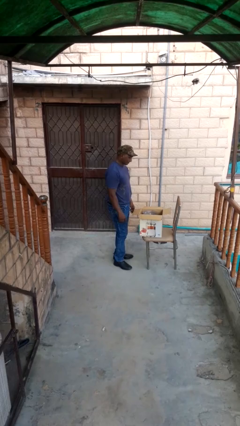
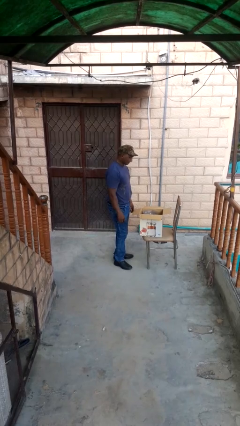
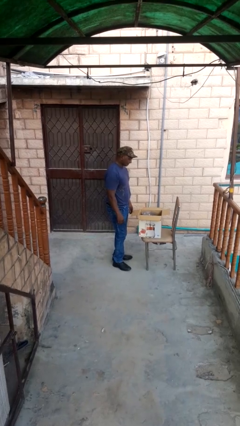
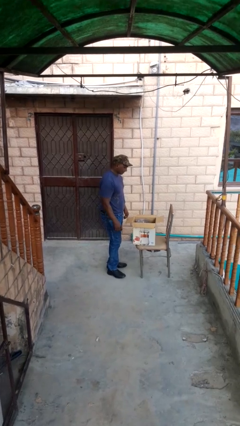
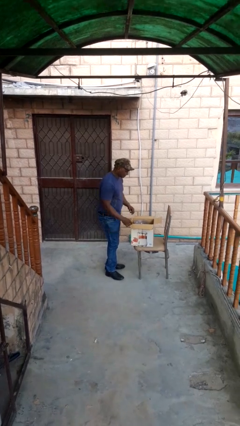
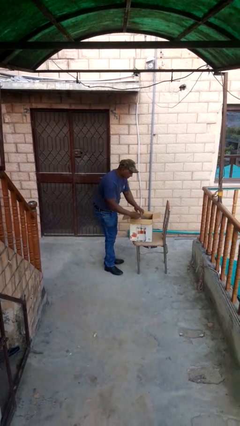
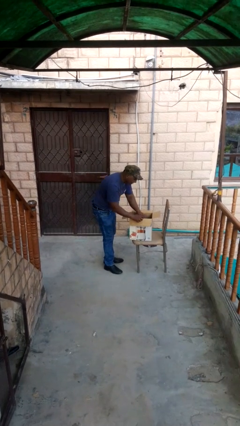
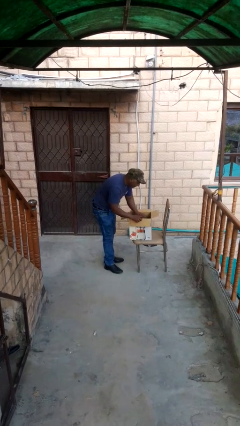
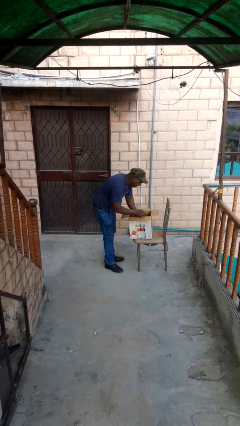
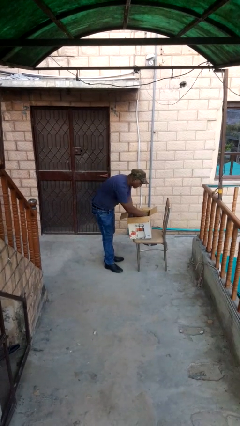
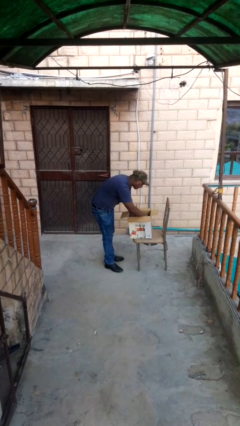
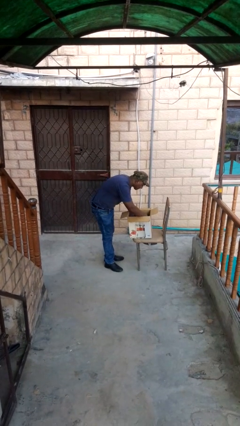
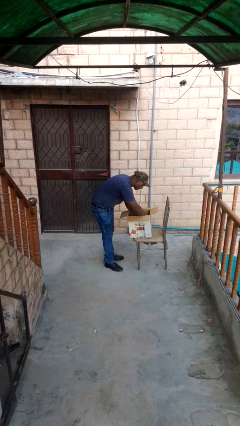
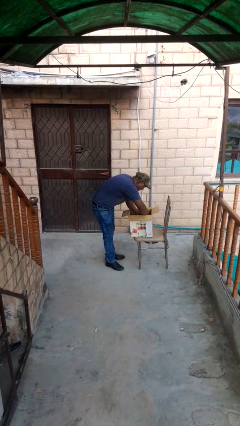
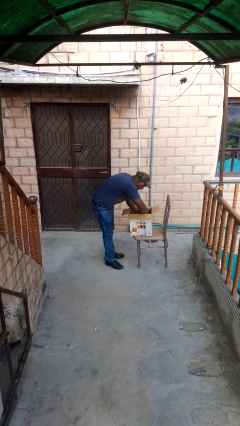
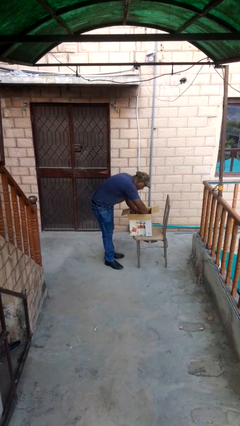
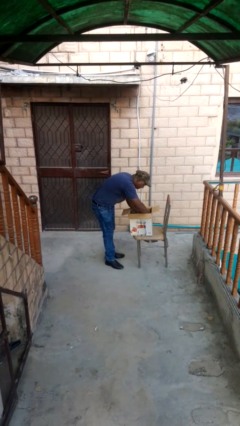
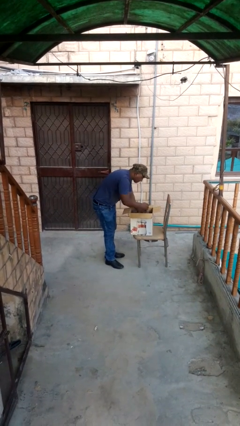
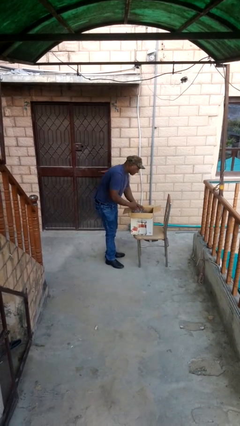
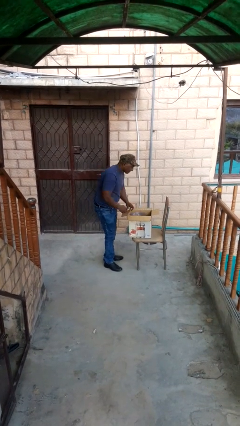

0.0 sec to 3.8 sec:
person searches in box

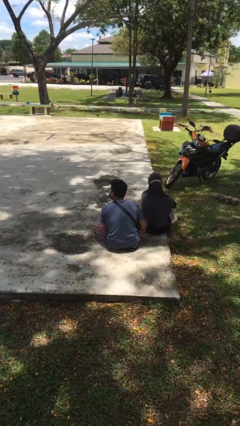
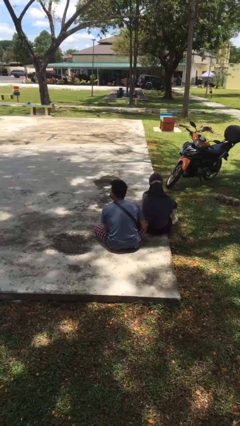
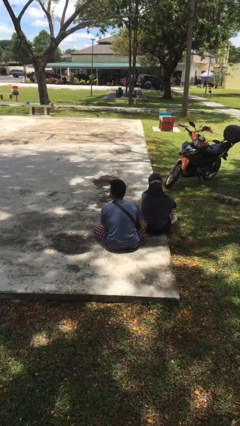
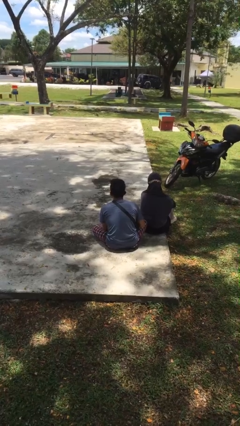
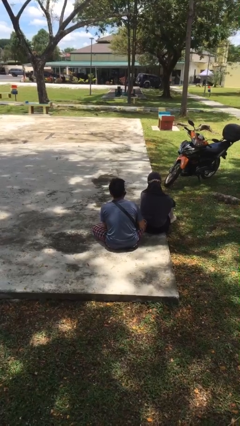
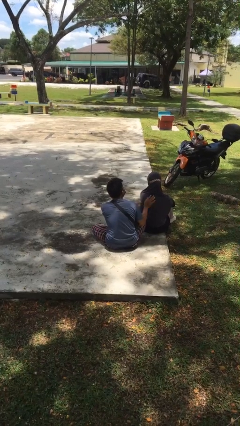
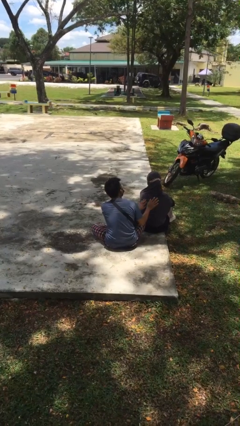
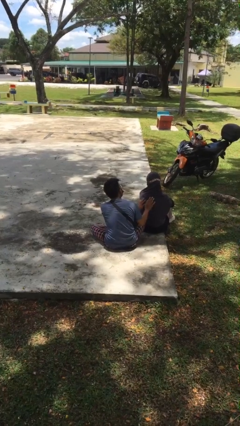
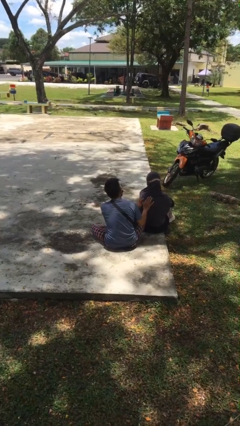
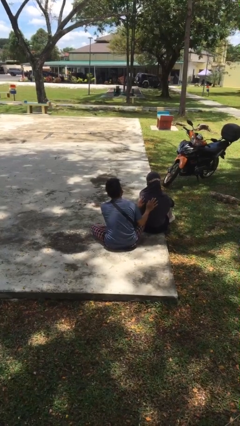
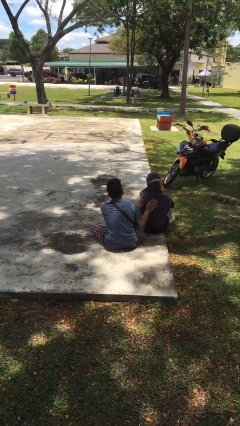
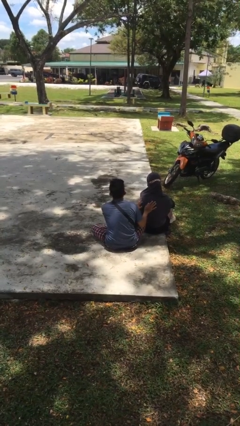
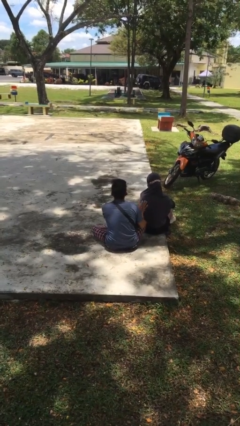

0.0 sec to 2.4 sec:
person touches back of person

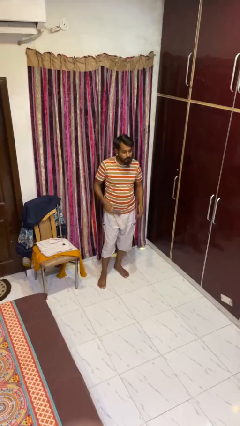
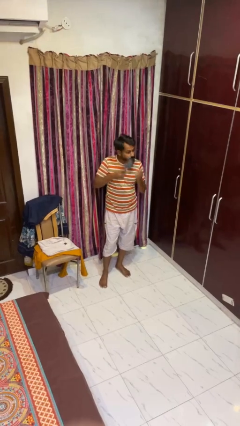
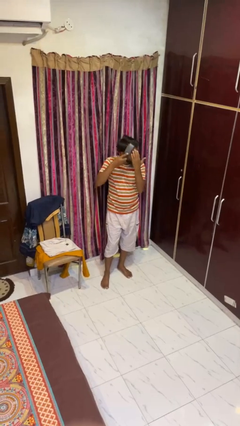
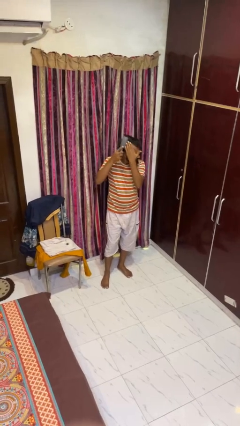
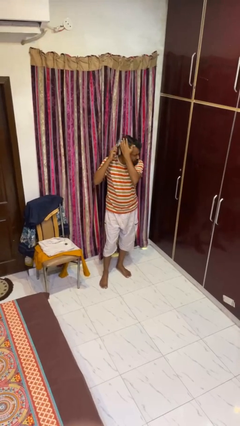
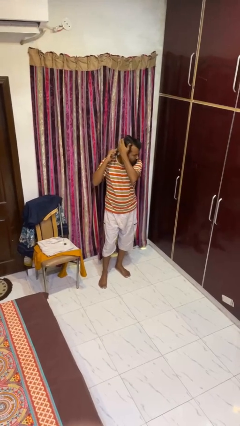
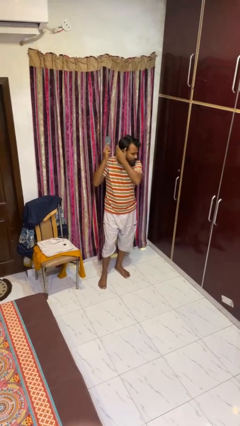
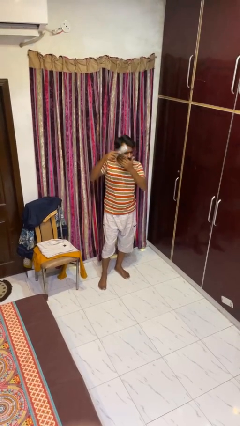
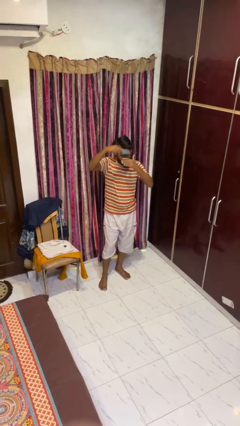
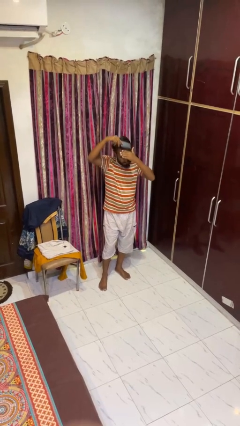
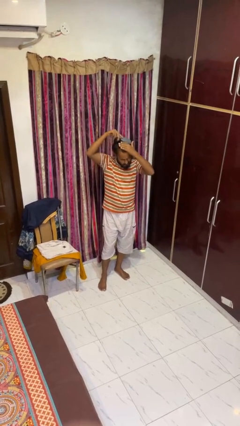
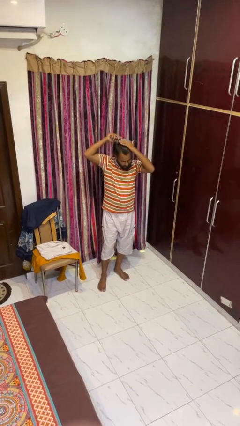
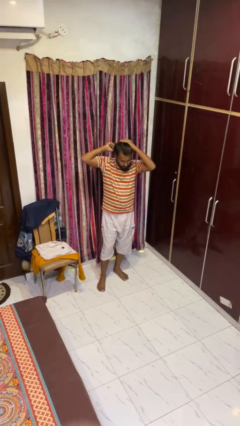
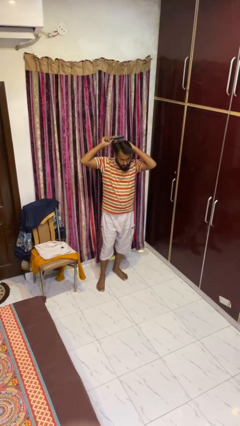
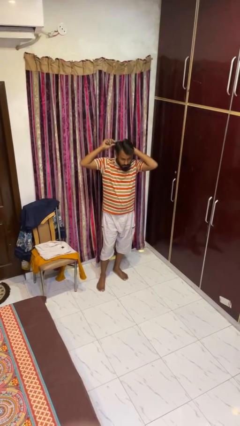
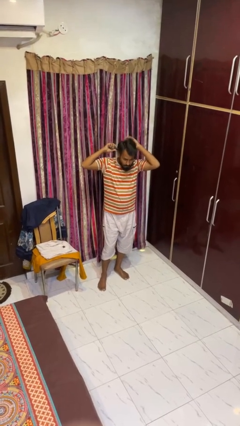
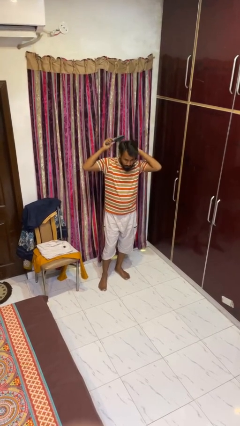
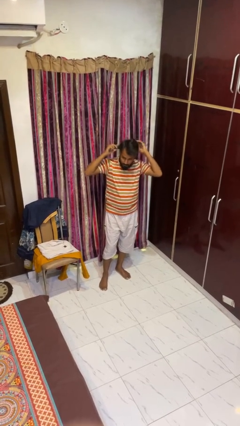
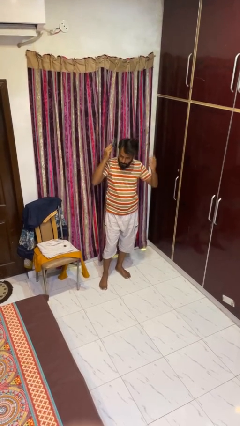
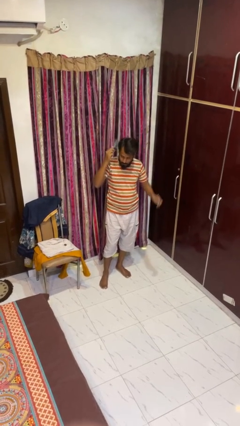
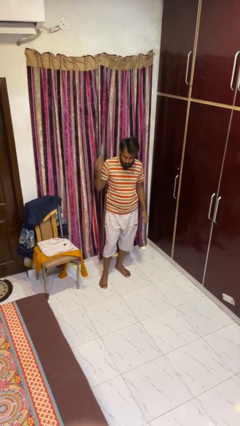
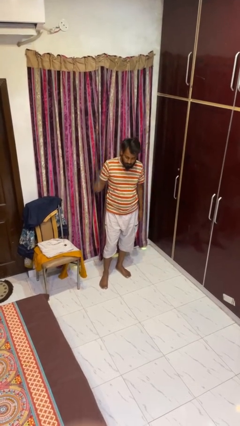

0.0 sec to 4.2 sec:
person brushes hair

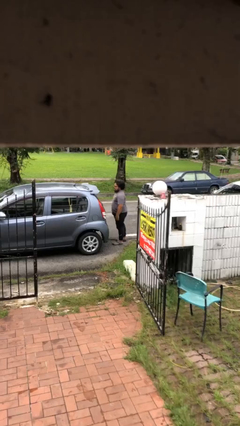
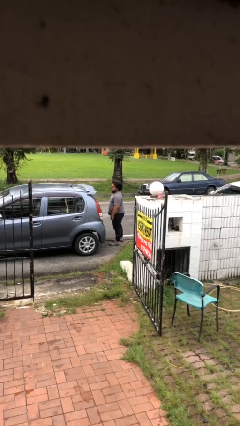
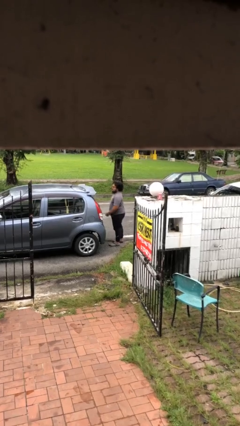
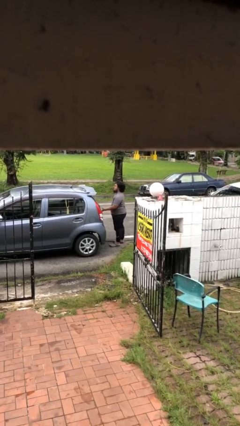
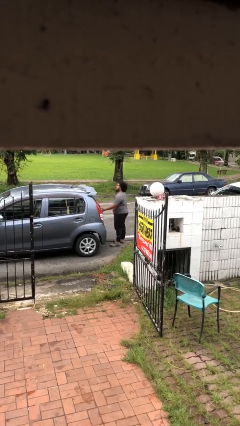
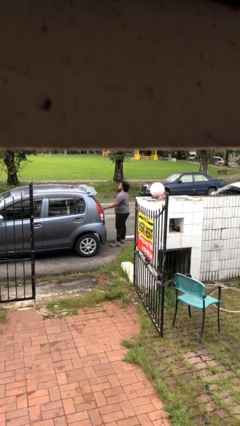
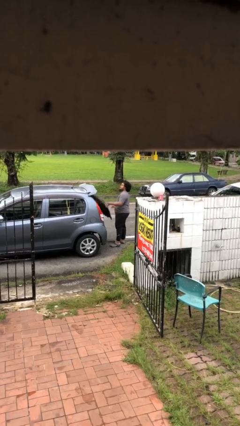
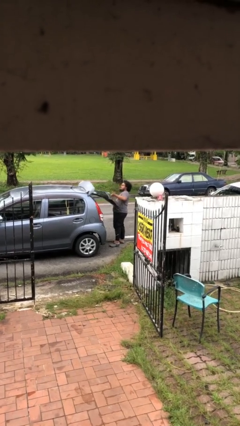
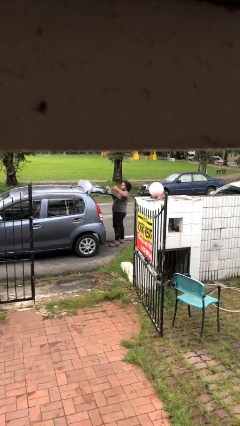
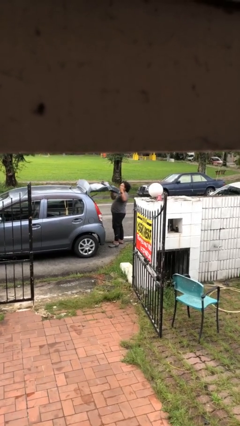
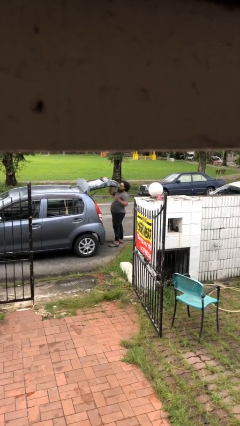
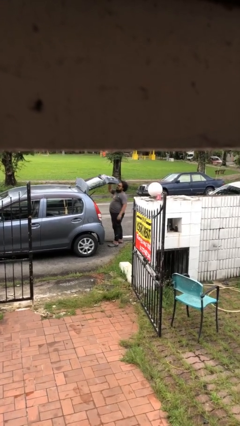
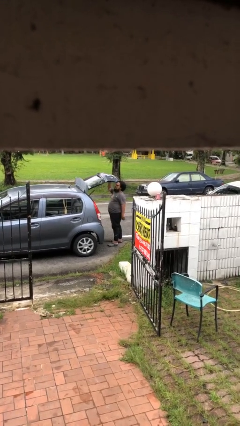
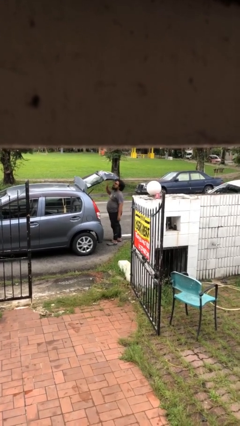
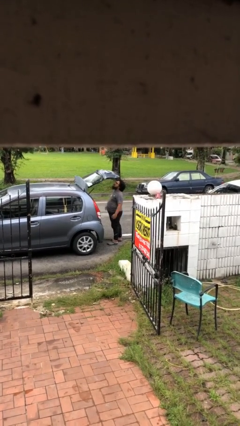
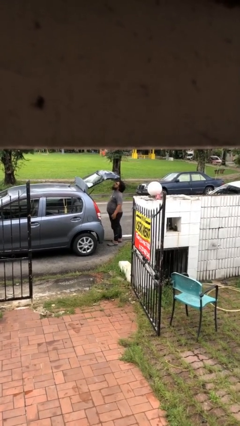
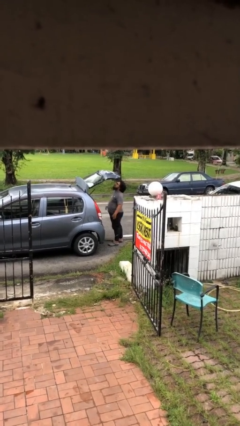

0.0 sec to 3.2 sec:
person opens car trunk

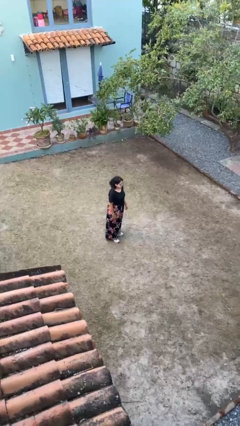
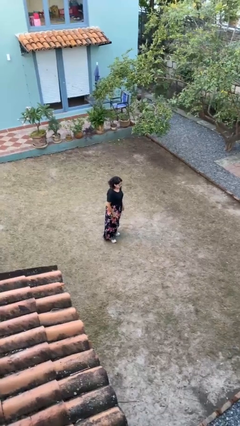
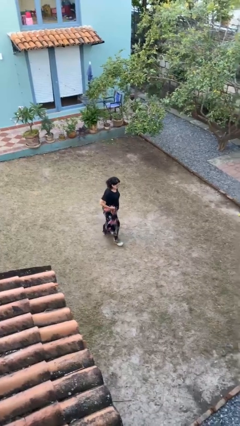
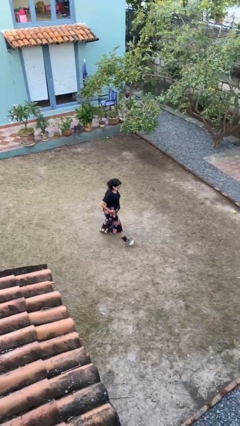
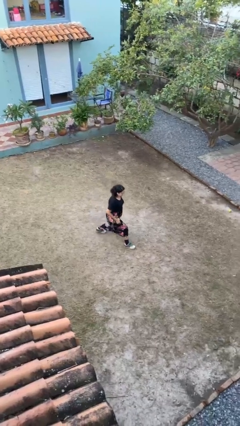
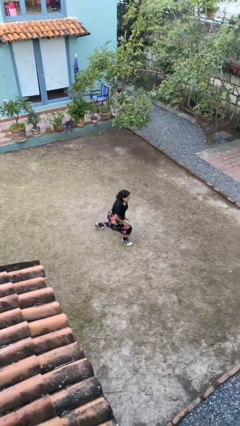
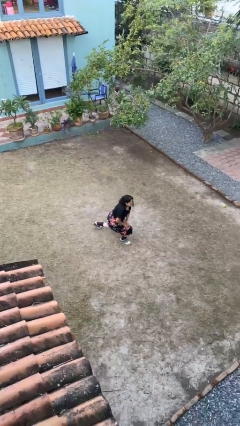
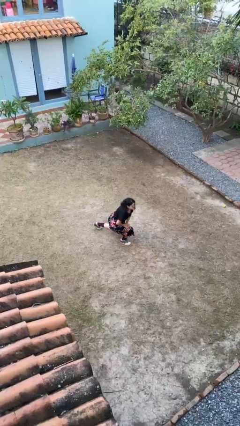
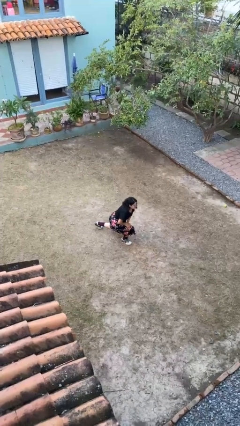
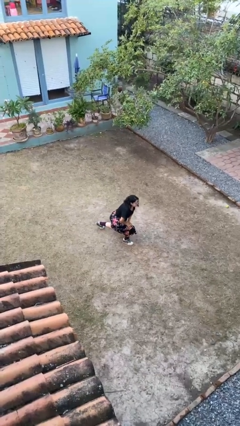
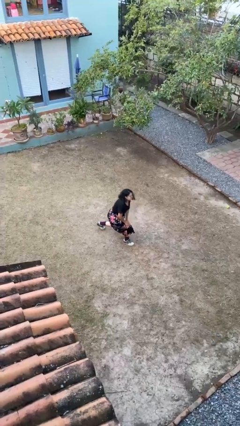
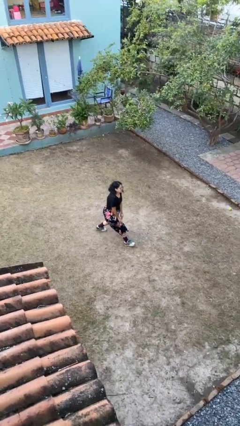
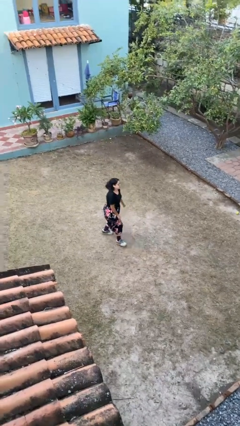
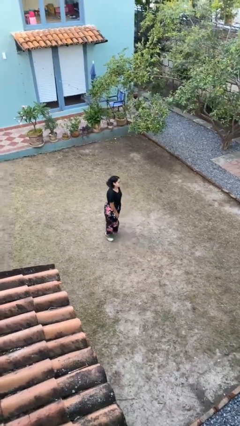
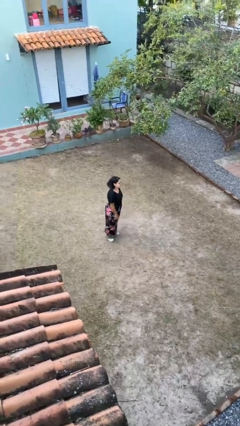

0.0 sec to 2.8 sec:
person exercises with lunges

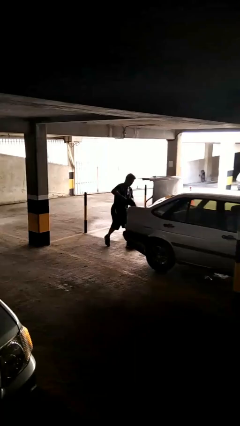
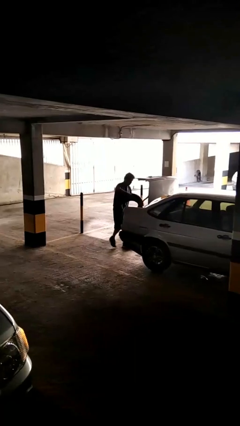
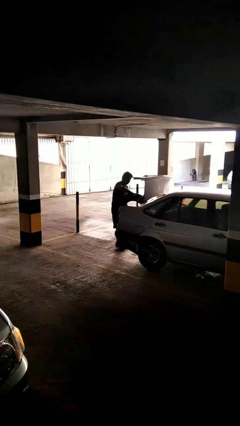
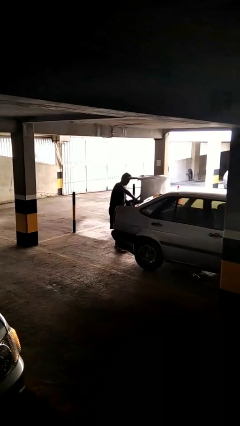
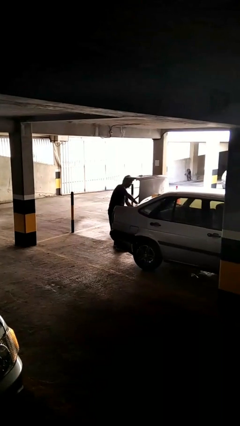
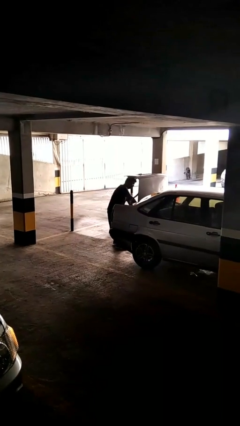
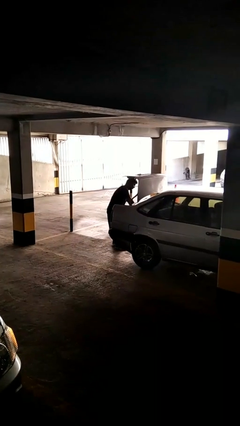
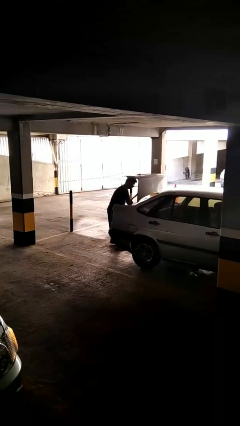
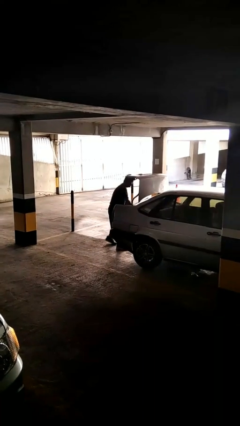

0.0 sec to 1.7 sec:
person loads car
